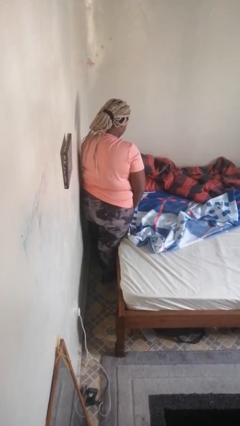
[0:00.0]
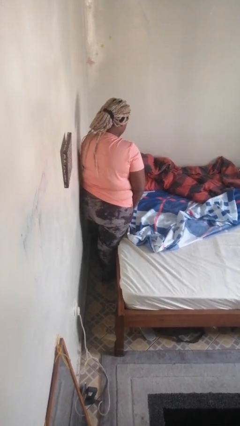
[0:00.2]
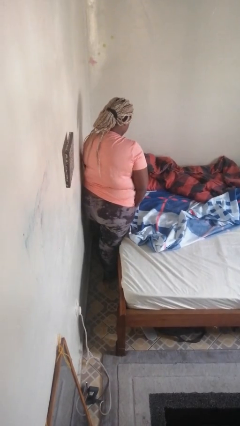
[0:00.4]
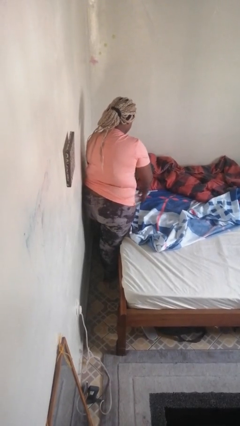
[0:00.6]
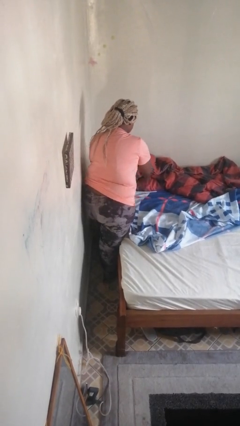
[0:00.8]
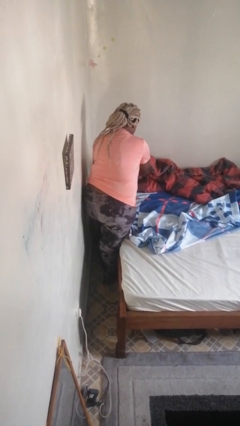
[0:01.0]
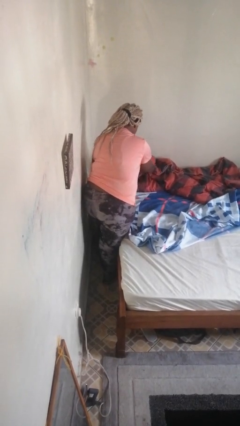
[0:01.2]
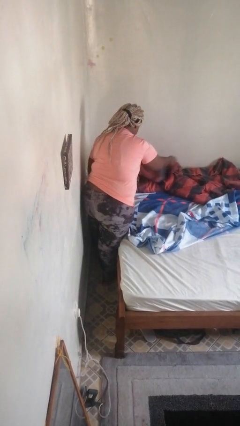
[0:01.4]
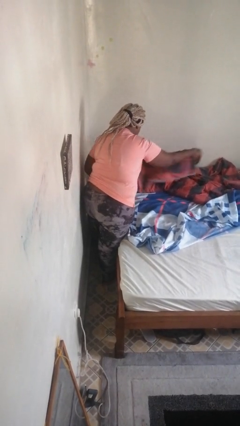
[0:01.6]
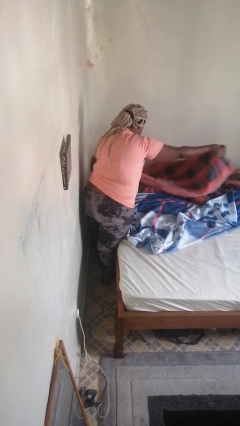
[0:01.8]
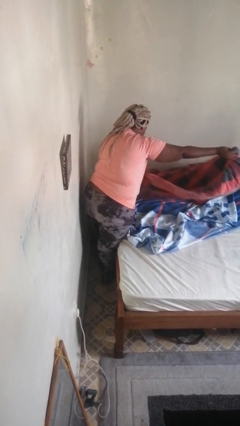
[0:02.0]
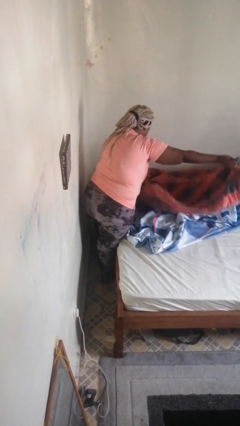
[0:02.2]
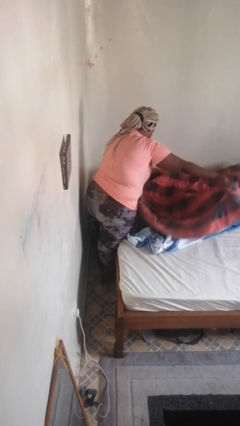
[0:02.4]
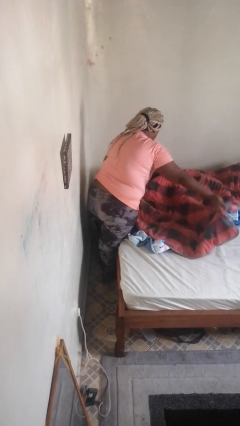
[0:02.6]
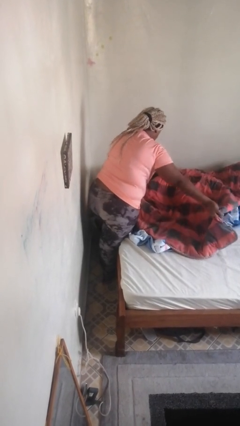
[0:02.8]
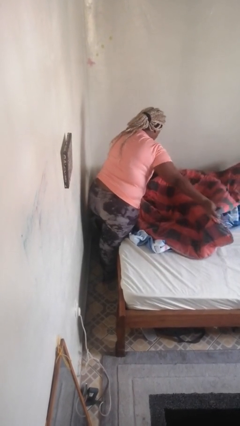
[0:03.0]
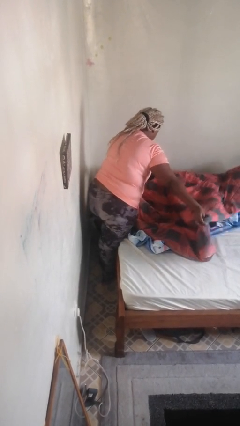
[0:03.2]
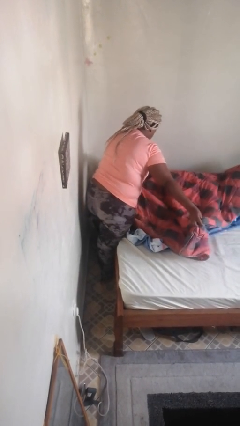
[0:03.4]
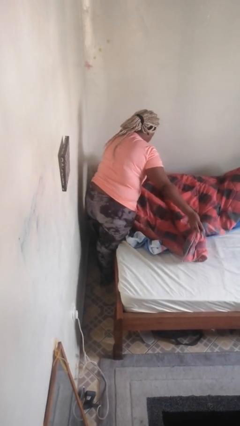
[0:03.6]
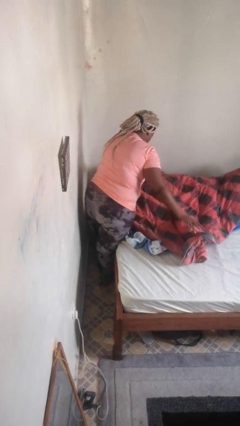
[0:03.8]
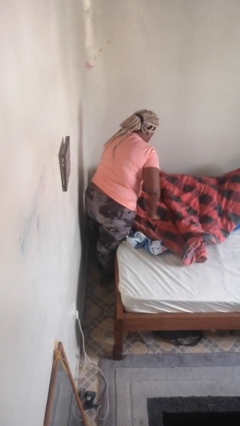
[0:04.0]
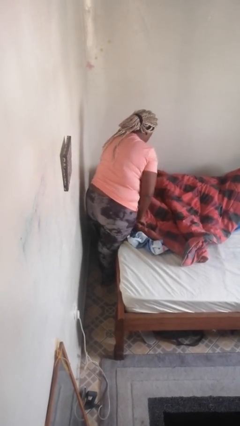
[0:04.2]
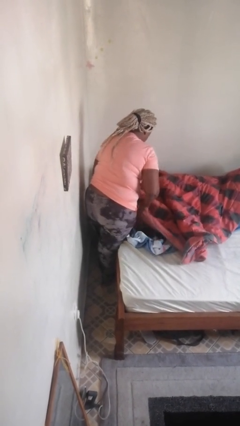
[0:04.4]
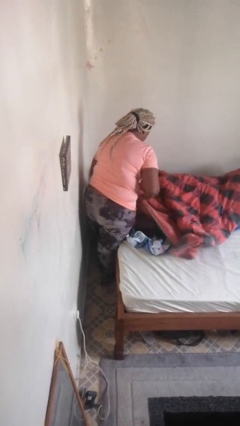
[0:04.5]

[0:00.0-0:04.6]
person makes bed

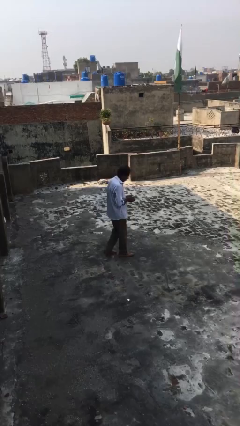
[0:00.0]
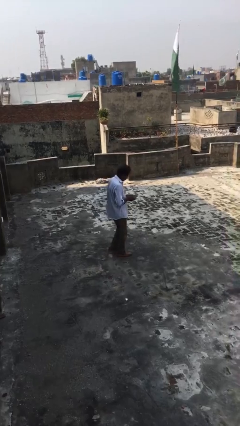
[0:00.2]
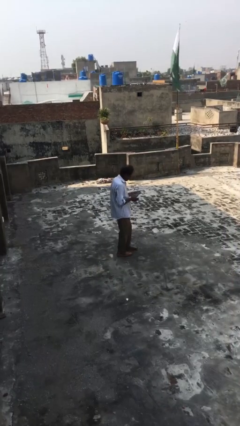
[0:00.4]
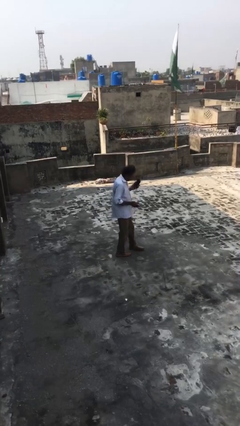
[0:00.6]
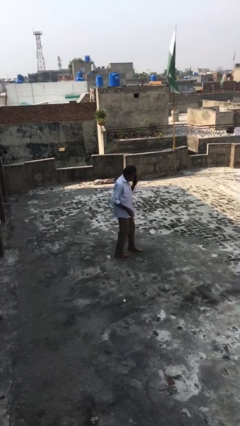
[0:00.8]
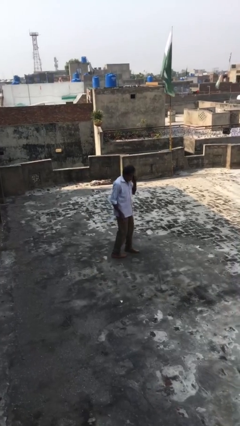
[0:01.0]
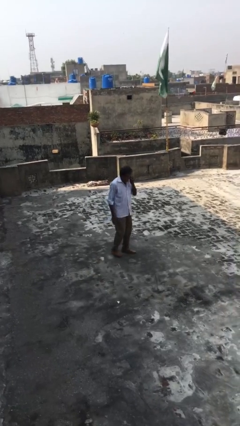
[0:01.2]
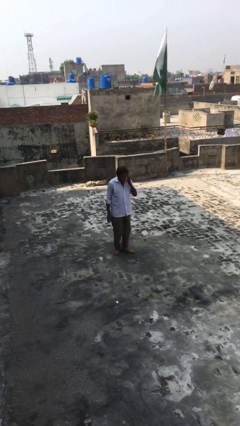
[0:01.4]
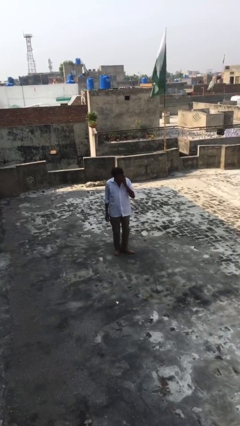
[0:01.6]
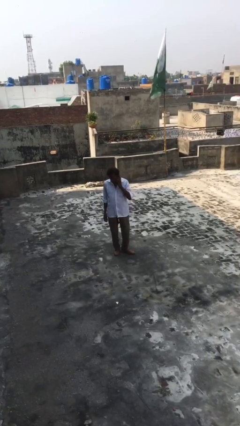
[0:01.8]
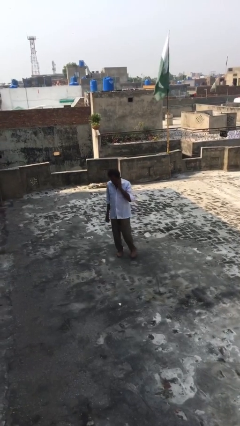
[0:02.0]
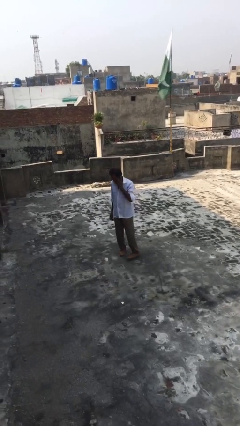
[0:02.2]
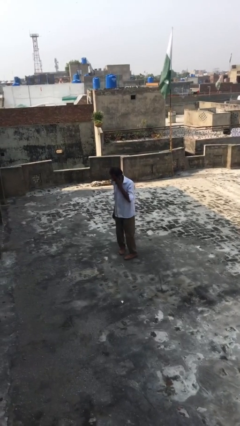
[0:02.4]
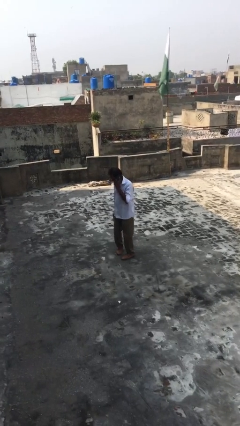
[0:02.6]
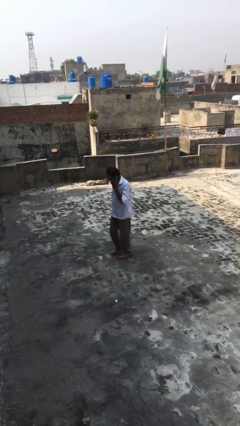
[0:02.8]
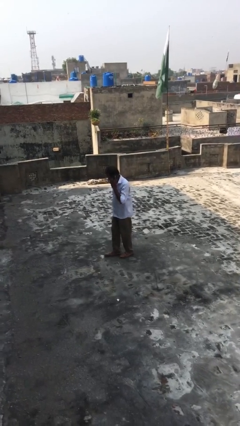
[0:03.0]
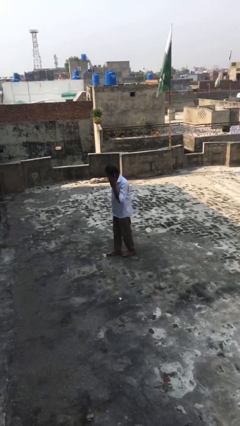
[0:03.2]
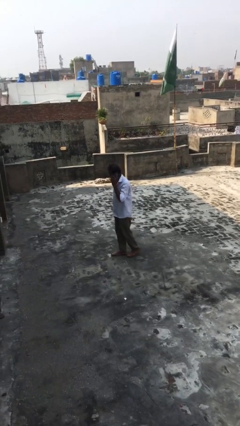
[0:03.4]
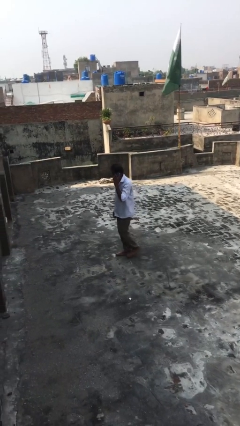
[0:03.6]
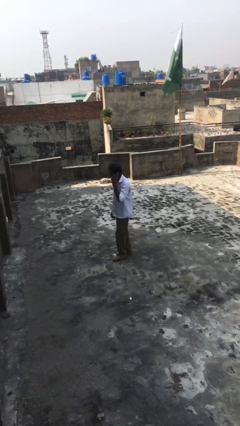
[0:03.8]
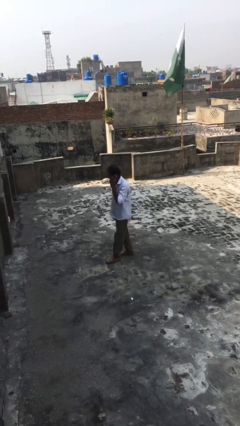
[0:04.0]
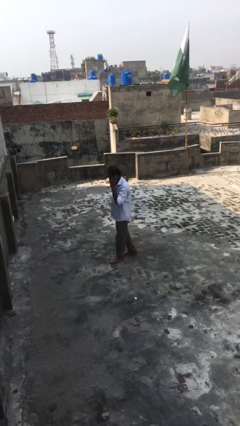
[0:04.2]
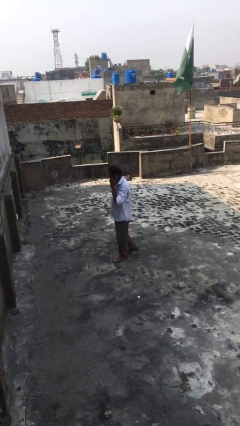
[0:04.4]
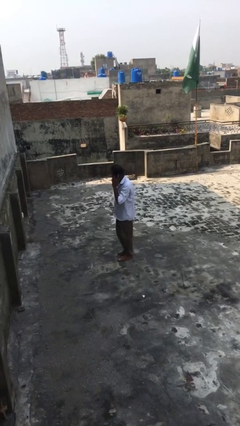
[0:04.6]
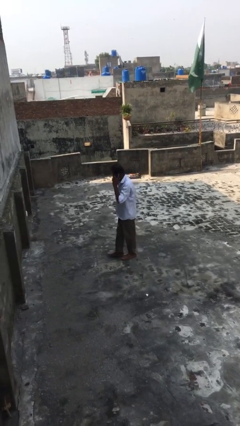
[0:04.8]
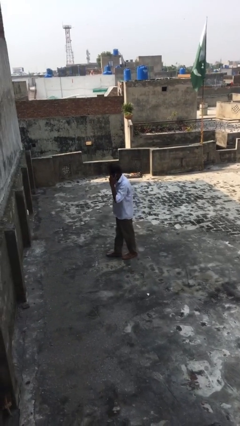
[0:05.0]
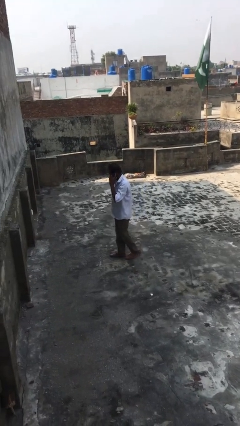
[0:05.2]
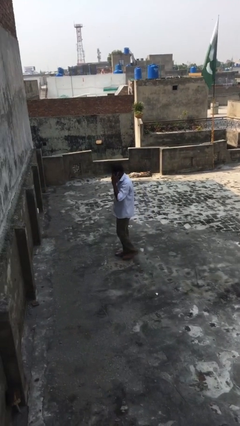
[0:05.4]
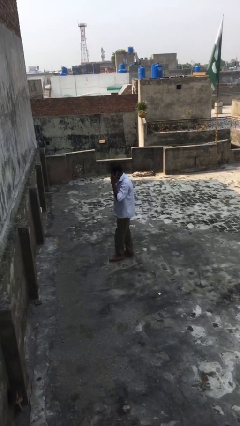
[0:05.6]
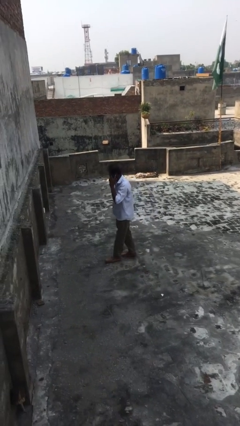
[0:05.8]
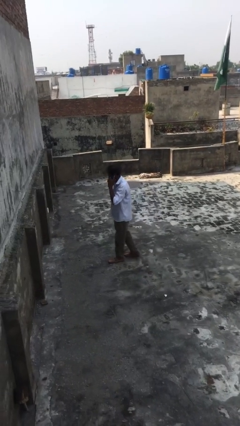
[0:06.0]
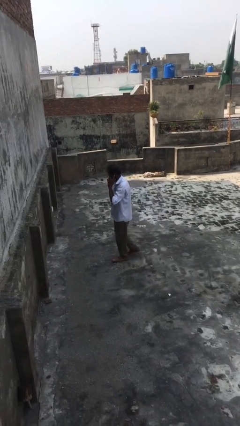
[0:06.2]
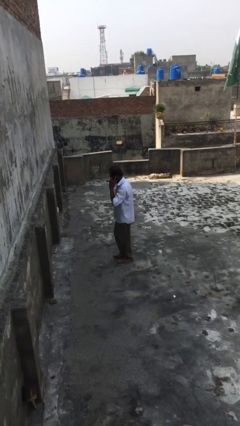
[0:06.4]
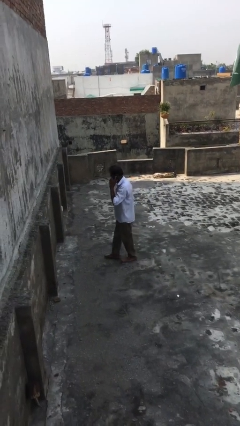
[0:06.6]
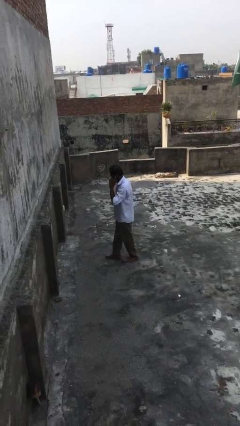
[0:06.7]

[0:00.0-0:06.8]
person talks on phone

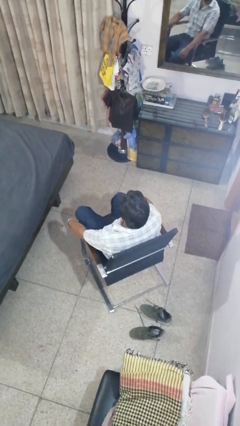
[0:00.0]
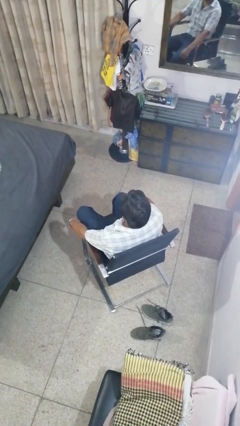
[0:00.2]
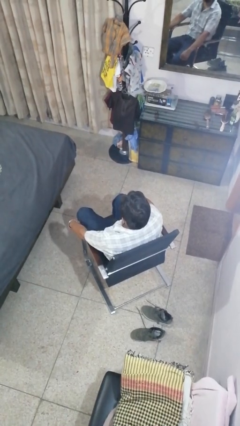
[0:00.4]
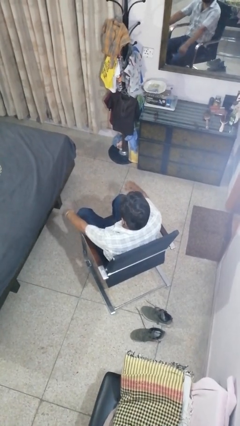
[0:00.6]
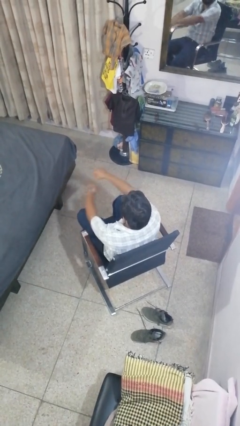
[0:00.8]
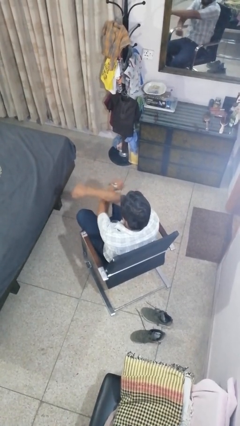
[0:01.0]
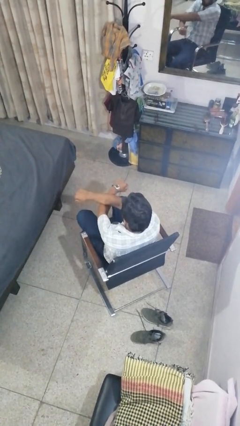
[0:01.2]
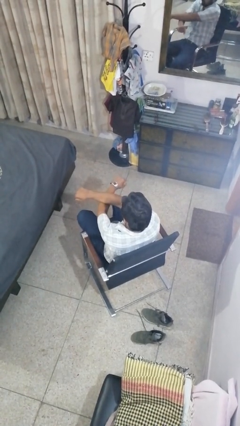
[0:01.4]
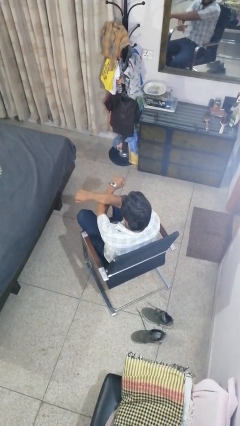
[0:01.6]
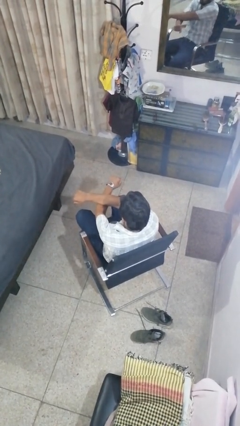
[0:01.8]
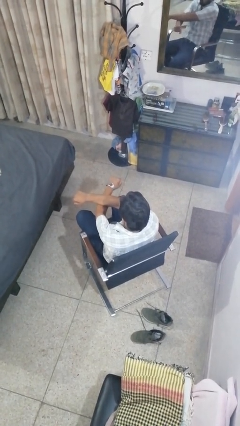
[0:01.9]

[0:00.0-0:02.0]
person gestures arms x

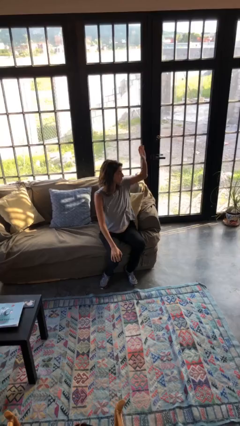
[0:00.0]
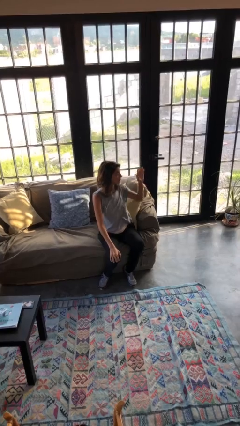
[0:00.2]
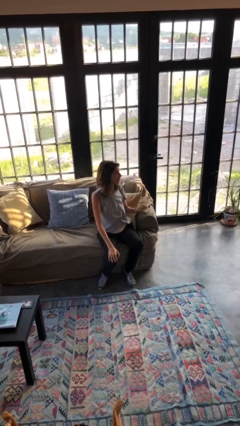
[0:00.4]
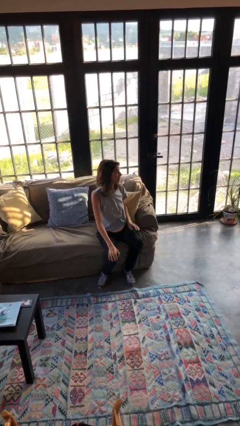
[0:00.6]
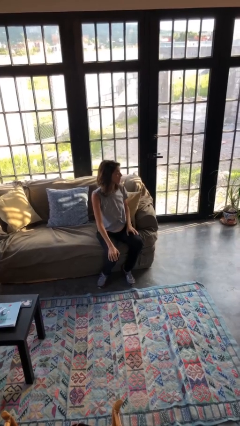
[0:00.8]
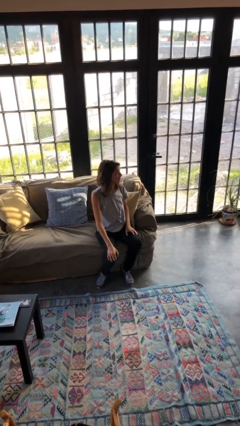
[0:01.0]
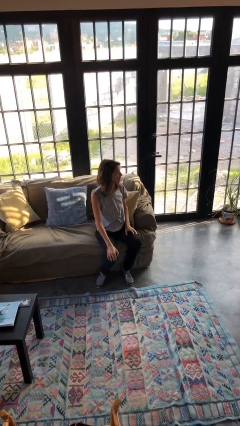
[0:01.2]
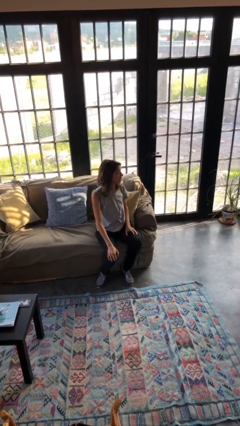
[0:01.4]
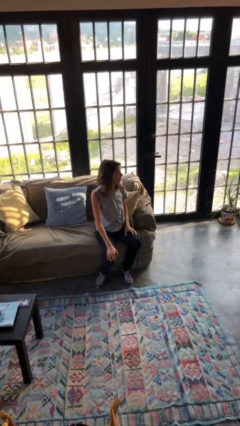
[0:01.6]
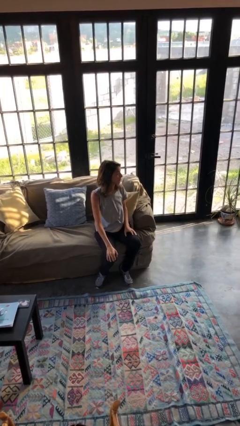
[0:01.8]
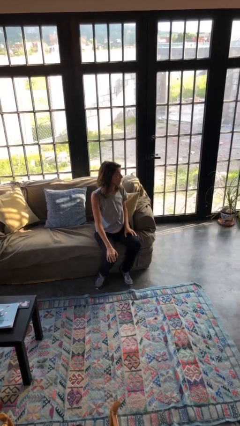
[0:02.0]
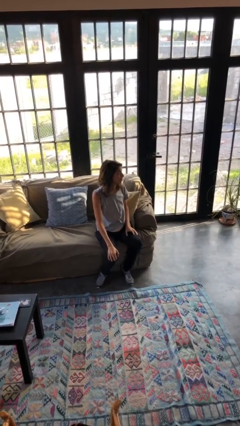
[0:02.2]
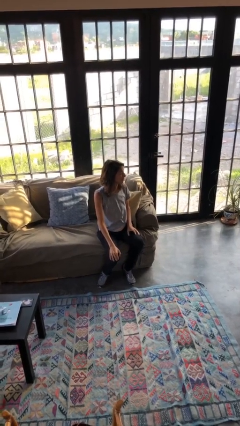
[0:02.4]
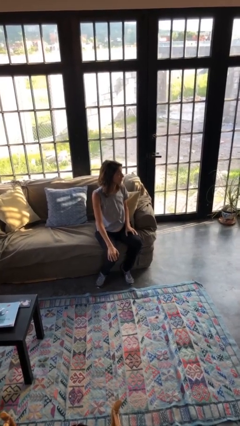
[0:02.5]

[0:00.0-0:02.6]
person gestures lower hand

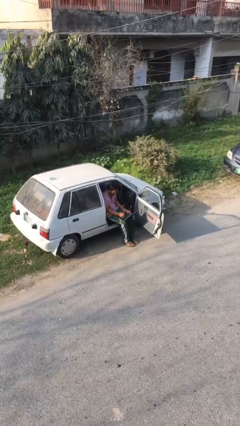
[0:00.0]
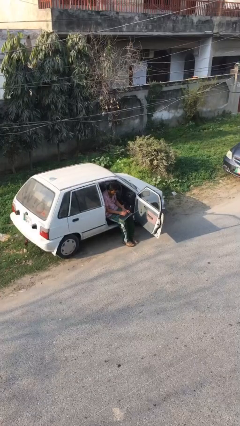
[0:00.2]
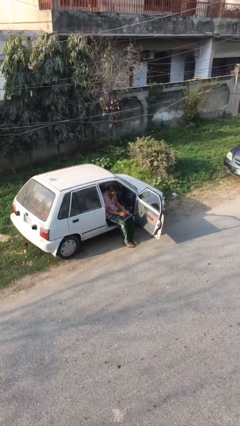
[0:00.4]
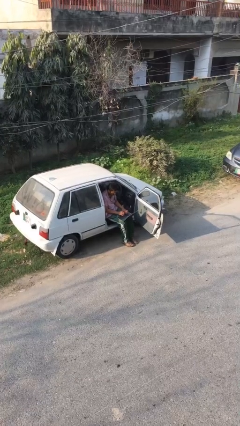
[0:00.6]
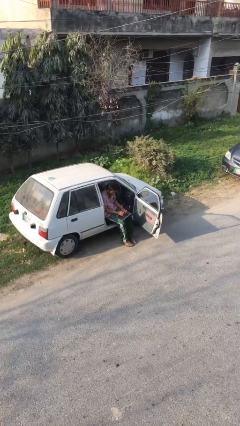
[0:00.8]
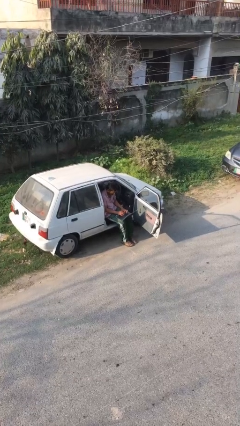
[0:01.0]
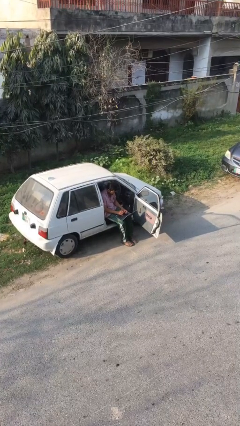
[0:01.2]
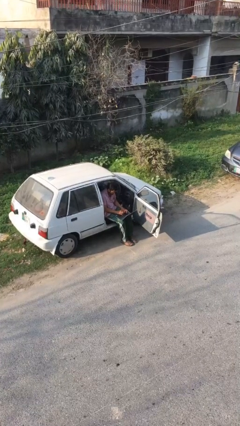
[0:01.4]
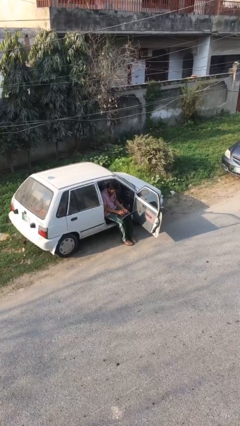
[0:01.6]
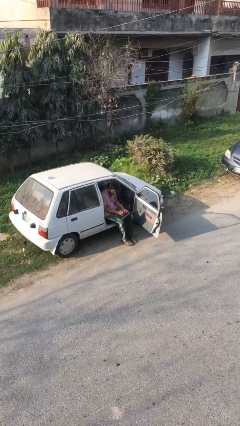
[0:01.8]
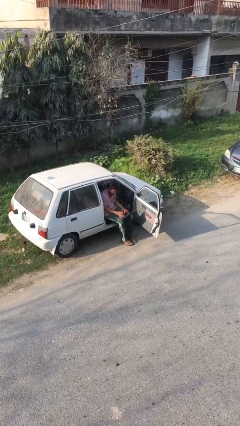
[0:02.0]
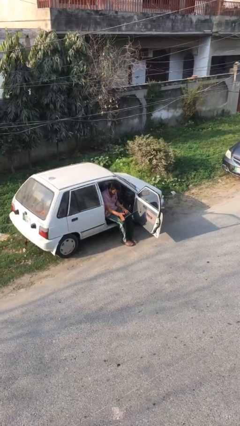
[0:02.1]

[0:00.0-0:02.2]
person interacts with laptop
